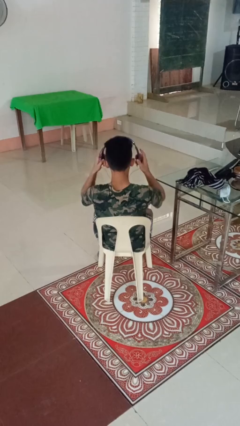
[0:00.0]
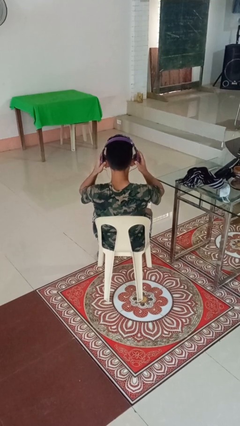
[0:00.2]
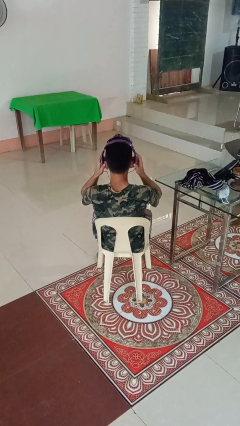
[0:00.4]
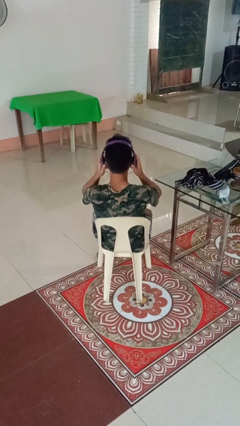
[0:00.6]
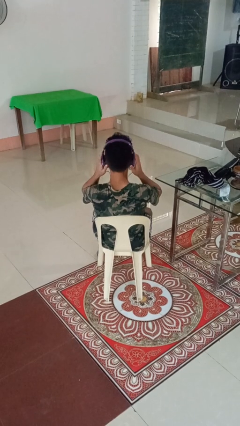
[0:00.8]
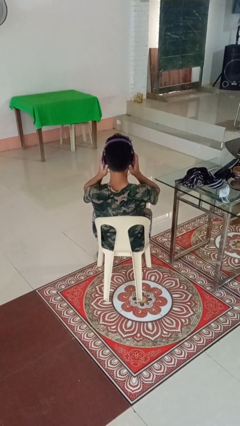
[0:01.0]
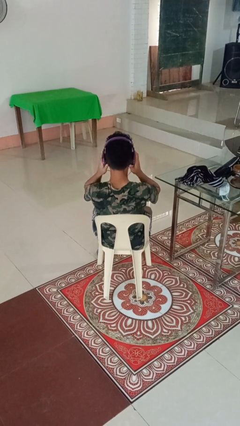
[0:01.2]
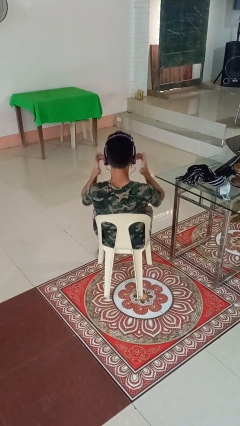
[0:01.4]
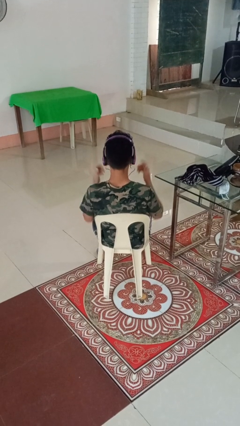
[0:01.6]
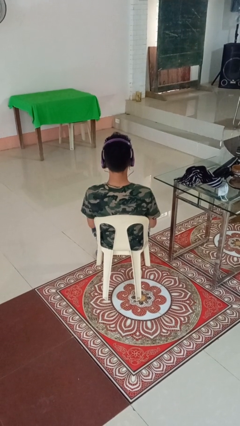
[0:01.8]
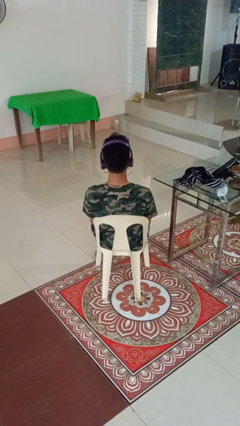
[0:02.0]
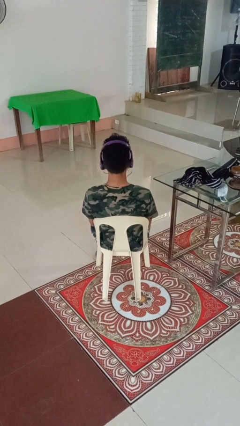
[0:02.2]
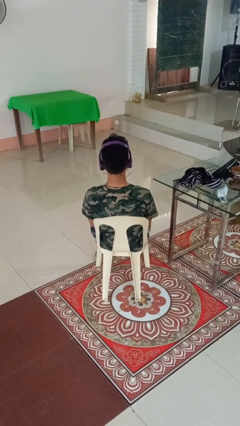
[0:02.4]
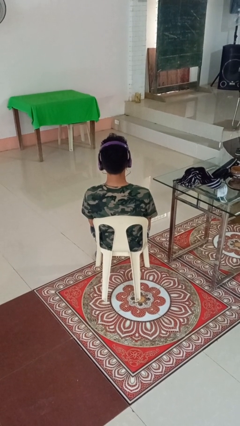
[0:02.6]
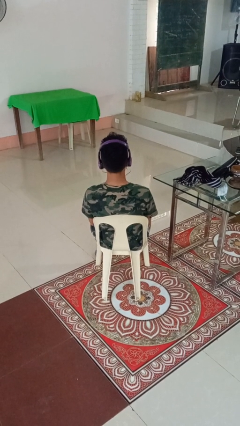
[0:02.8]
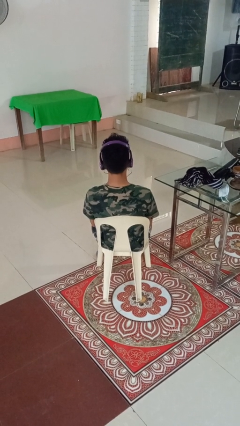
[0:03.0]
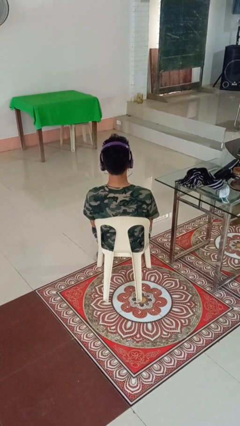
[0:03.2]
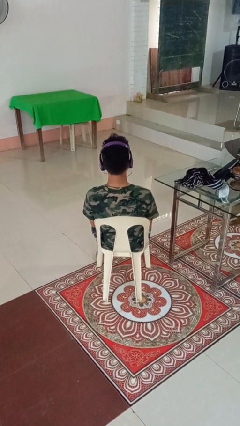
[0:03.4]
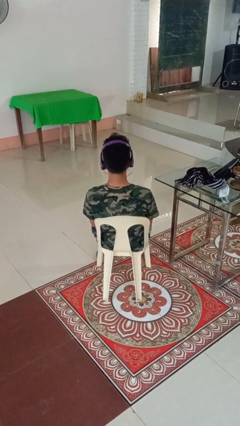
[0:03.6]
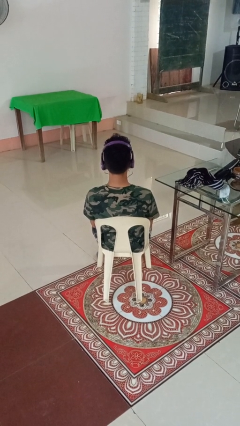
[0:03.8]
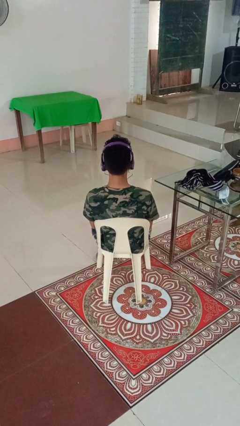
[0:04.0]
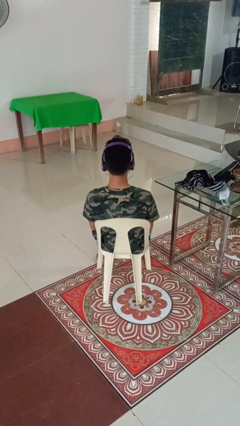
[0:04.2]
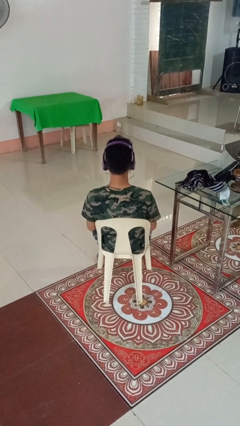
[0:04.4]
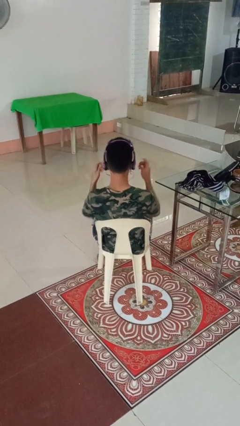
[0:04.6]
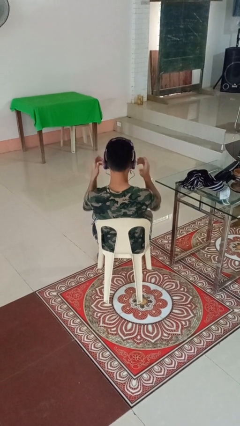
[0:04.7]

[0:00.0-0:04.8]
person puts on headphones

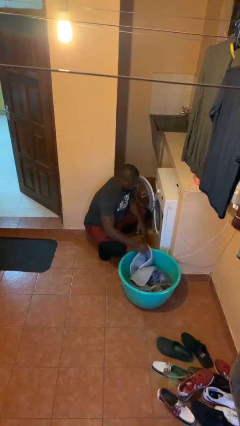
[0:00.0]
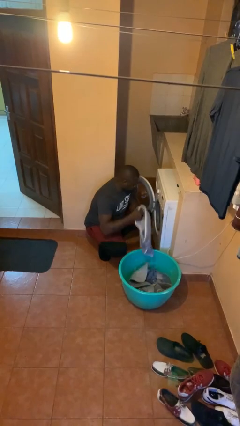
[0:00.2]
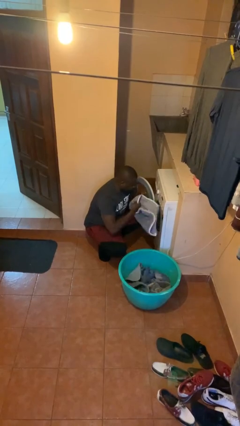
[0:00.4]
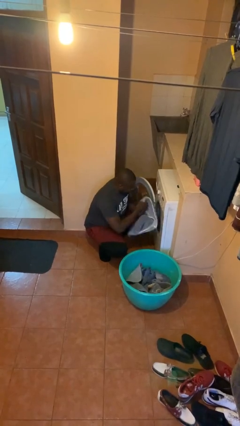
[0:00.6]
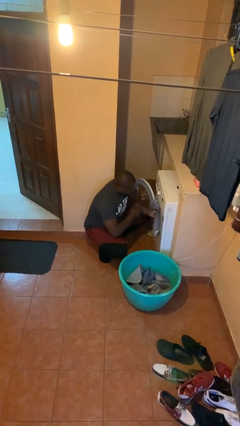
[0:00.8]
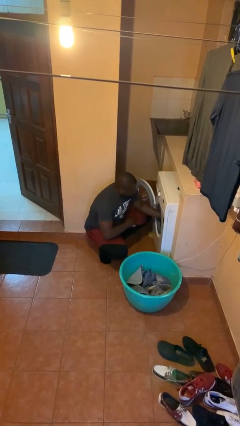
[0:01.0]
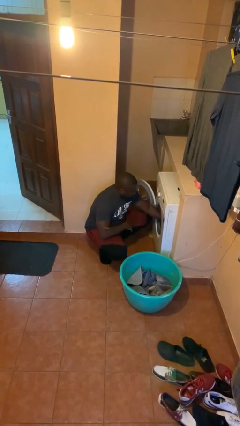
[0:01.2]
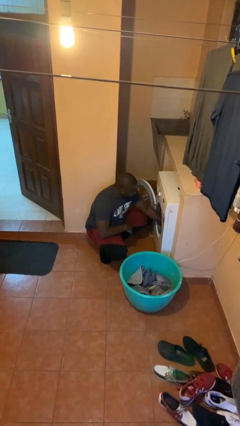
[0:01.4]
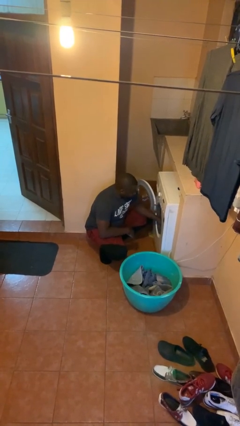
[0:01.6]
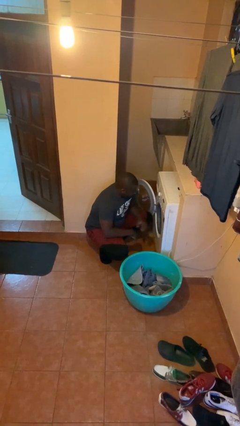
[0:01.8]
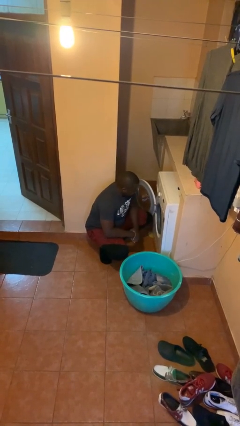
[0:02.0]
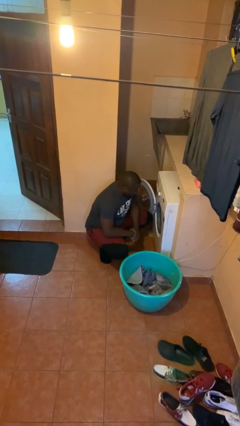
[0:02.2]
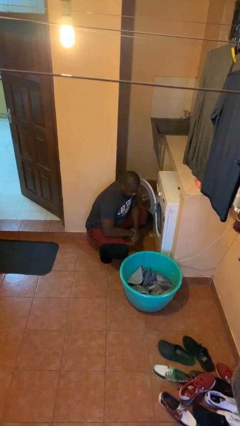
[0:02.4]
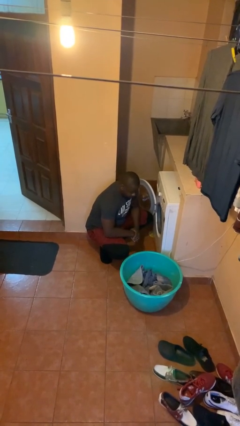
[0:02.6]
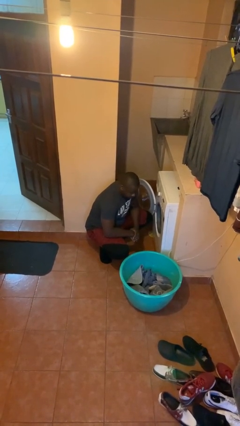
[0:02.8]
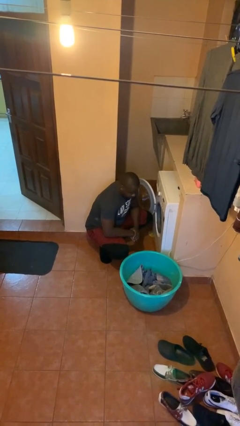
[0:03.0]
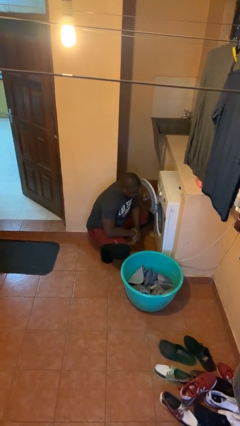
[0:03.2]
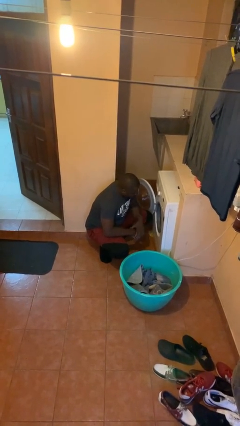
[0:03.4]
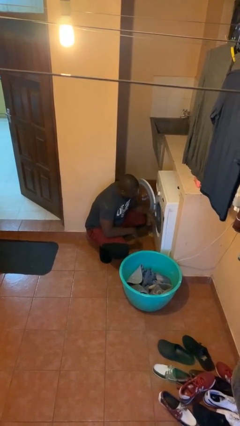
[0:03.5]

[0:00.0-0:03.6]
person loads dryer

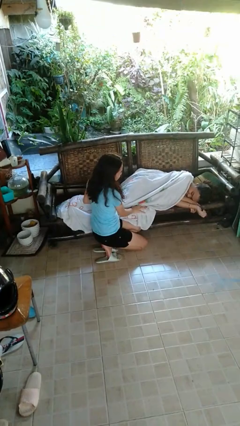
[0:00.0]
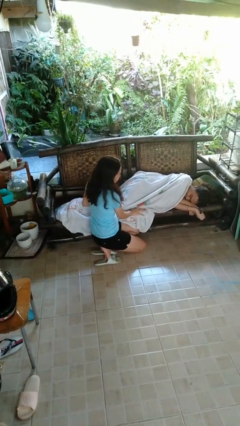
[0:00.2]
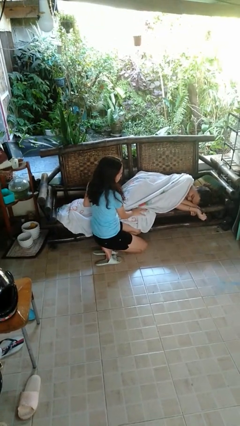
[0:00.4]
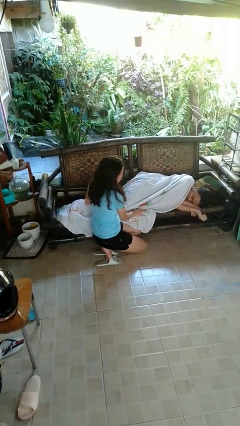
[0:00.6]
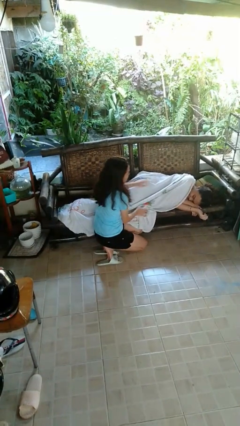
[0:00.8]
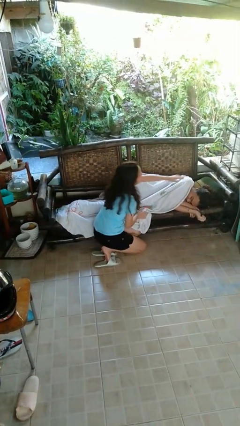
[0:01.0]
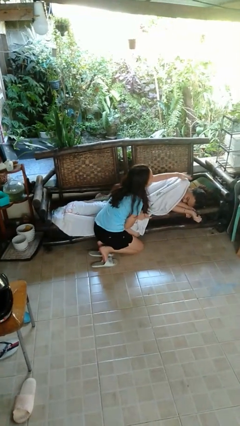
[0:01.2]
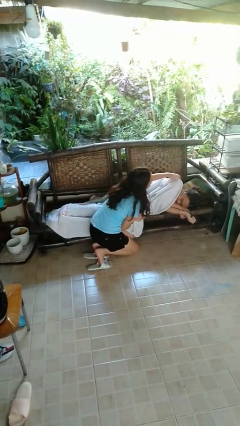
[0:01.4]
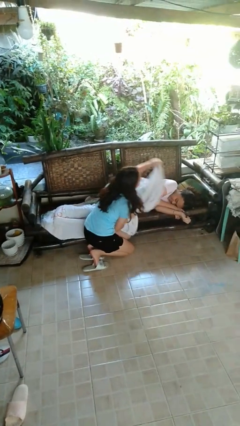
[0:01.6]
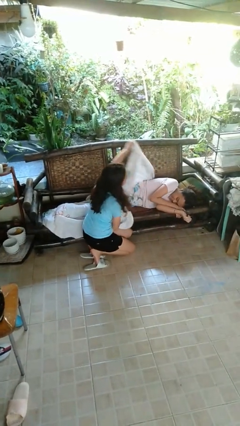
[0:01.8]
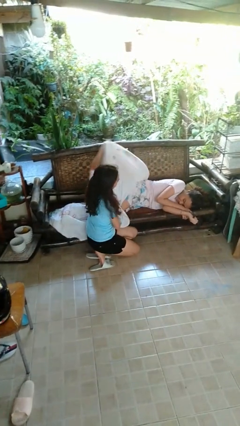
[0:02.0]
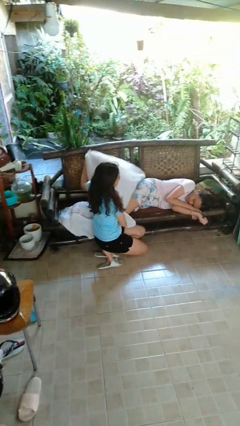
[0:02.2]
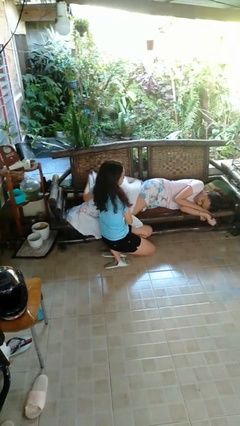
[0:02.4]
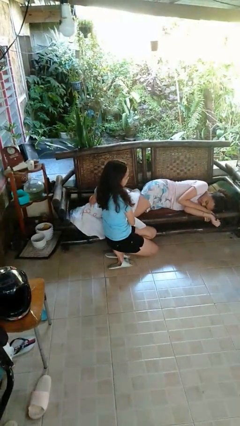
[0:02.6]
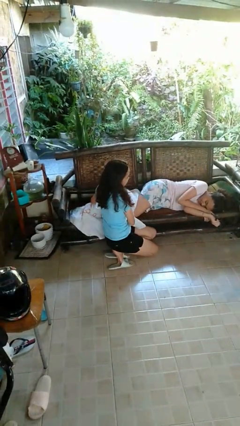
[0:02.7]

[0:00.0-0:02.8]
person uncovers friend with blanket

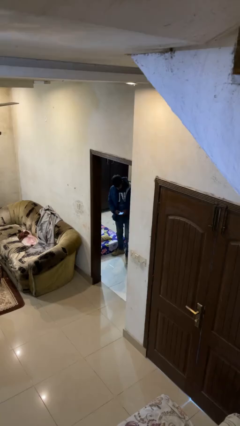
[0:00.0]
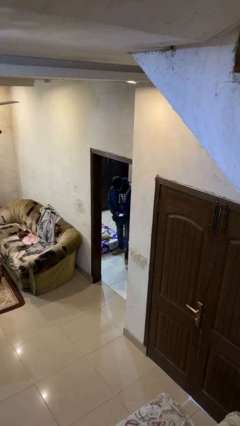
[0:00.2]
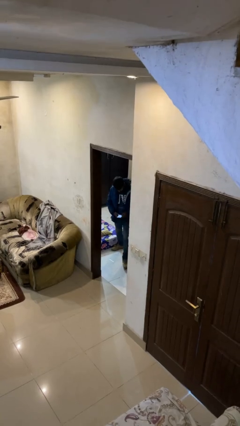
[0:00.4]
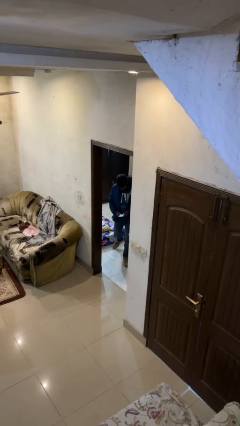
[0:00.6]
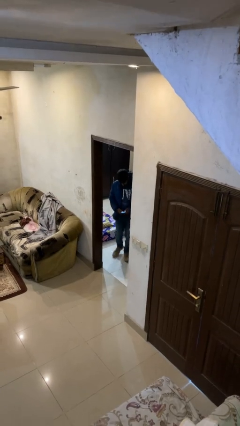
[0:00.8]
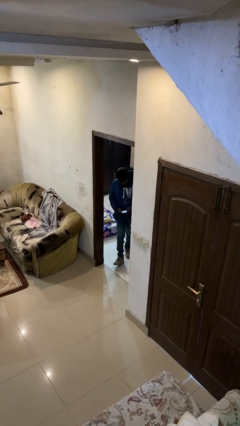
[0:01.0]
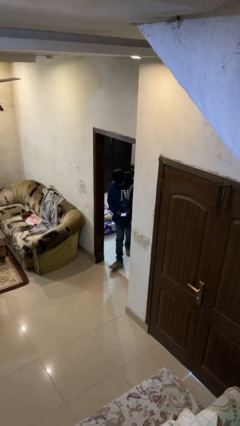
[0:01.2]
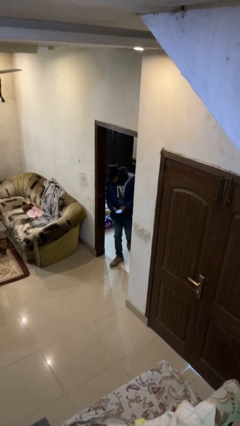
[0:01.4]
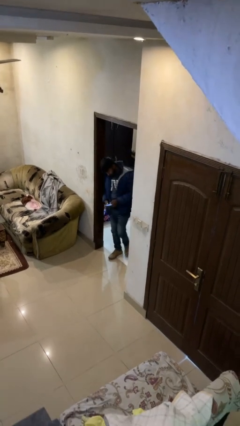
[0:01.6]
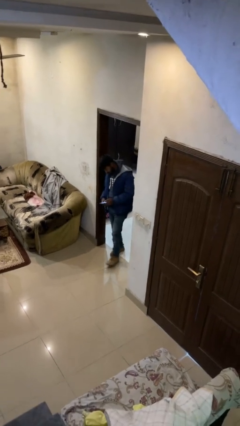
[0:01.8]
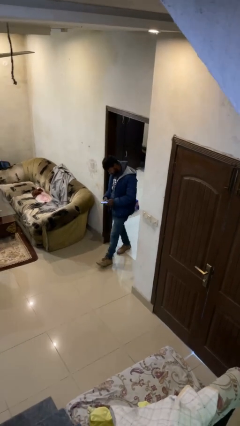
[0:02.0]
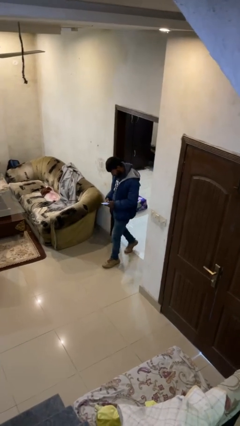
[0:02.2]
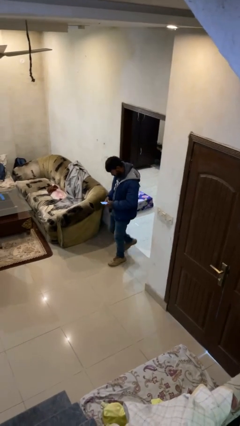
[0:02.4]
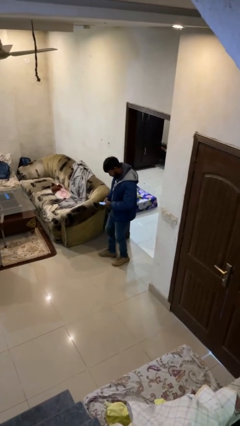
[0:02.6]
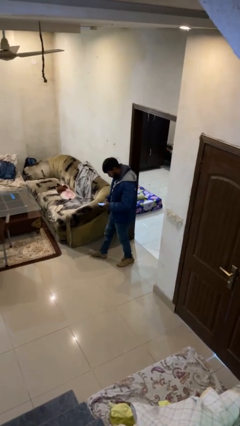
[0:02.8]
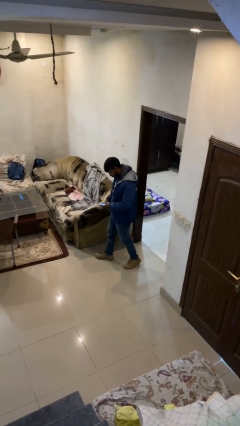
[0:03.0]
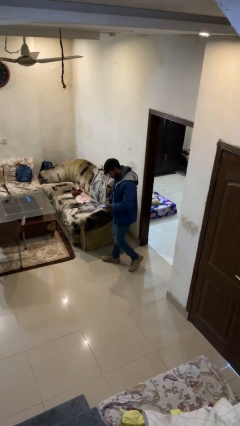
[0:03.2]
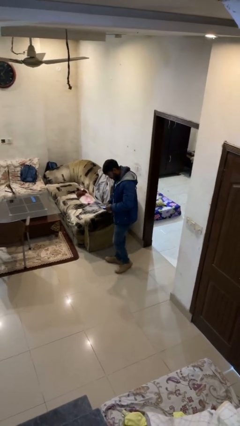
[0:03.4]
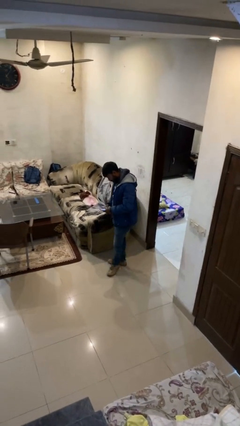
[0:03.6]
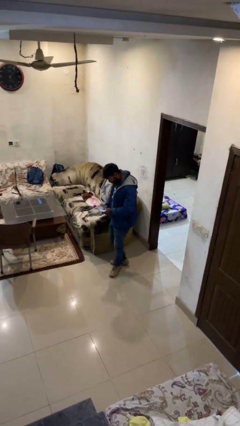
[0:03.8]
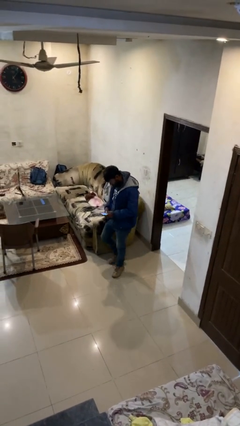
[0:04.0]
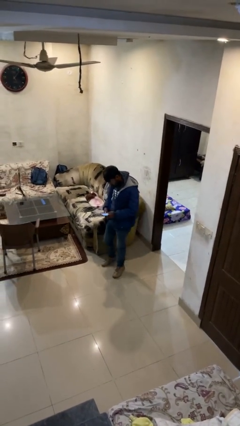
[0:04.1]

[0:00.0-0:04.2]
person enters scene through structure

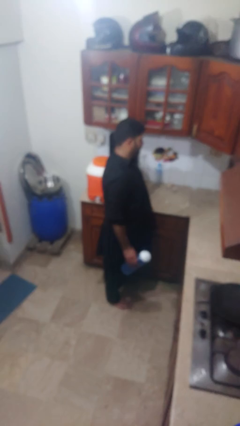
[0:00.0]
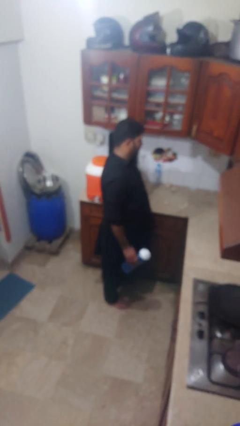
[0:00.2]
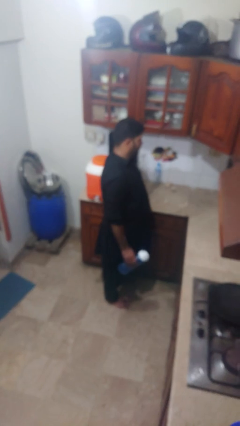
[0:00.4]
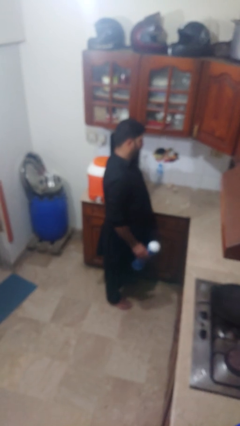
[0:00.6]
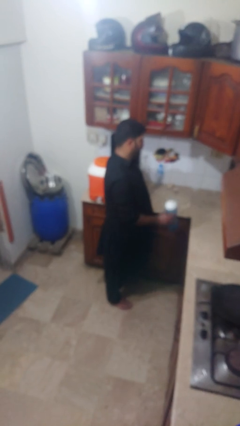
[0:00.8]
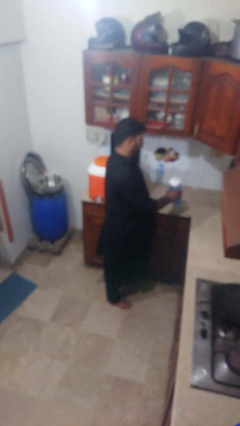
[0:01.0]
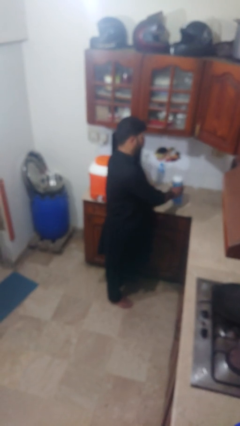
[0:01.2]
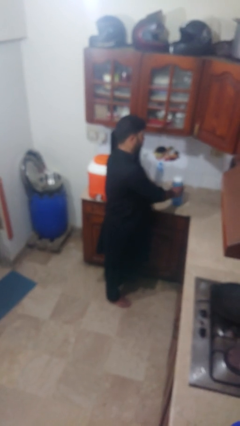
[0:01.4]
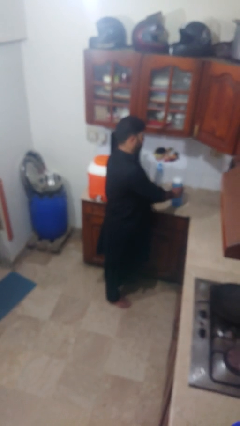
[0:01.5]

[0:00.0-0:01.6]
person puts down object on countertop

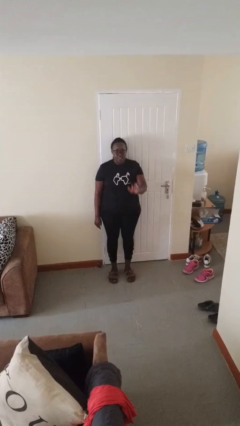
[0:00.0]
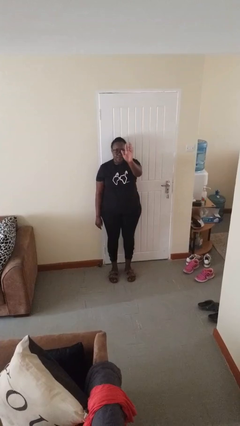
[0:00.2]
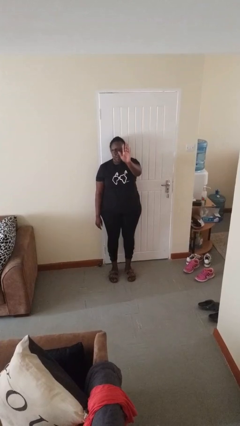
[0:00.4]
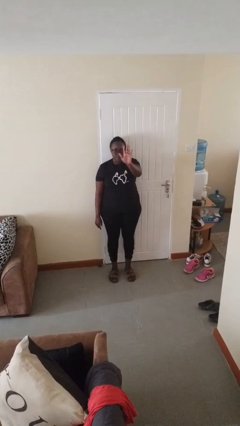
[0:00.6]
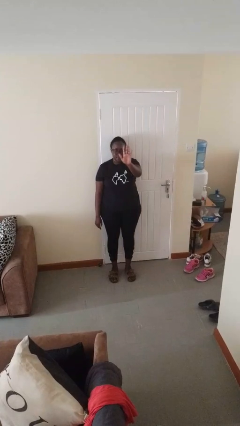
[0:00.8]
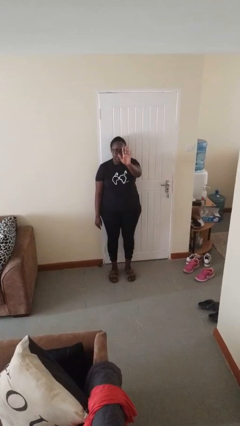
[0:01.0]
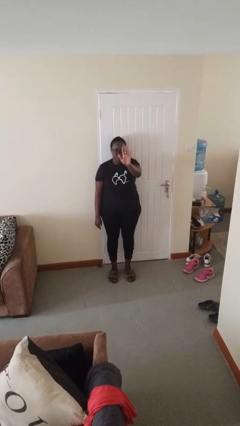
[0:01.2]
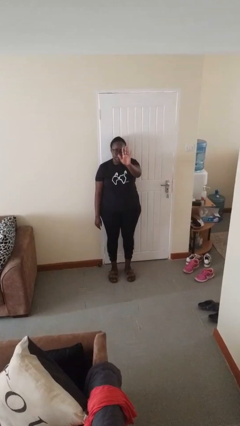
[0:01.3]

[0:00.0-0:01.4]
person gestures number five
